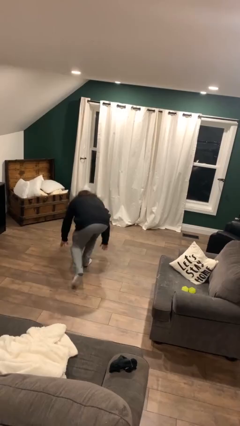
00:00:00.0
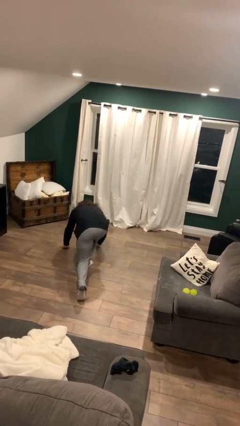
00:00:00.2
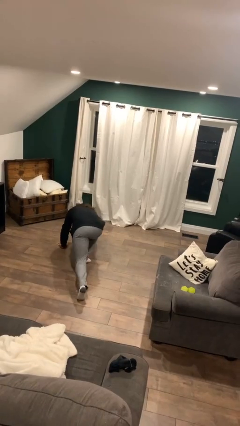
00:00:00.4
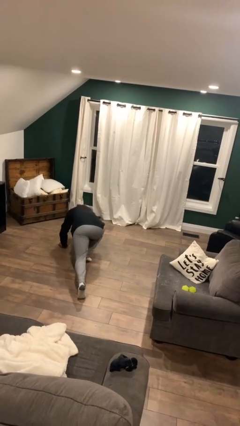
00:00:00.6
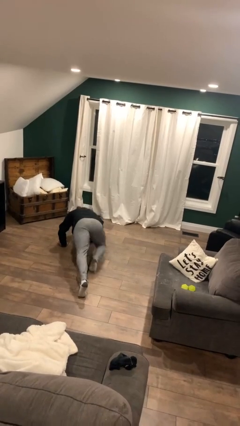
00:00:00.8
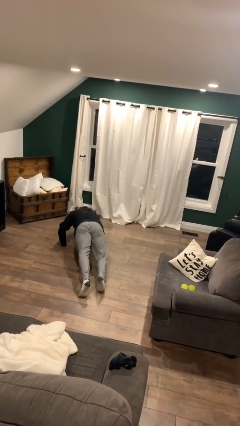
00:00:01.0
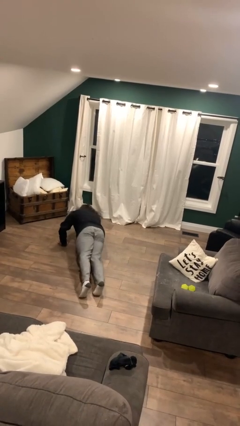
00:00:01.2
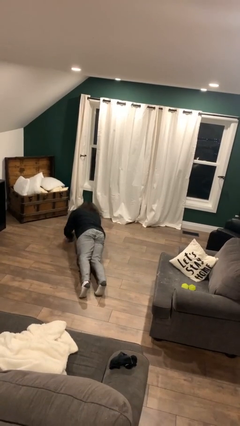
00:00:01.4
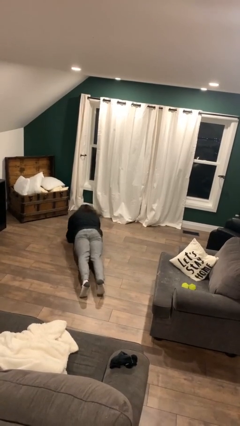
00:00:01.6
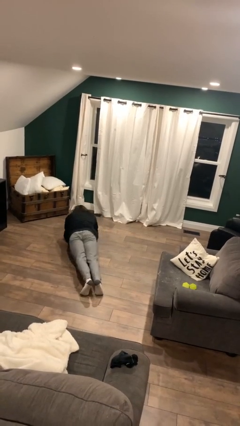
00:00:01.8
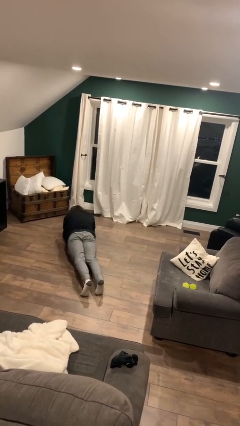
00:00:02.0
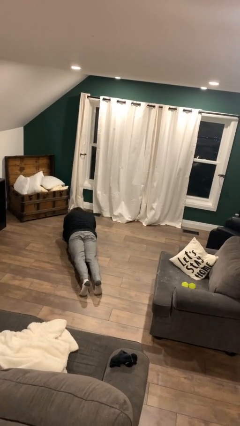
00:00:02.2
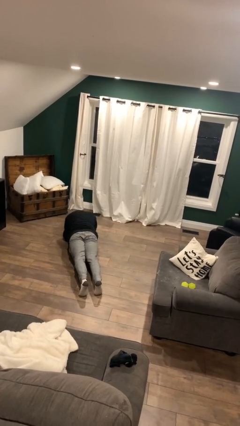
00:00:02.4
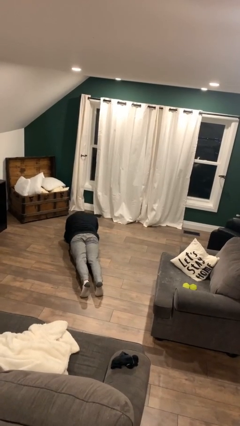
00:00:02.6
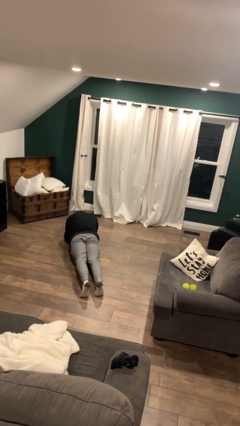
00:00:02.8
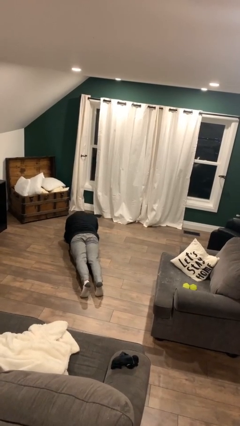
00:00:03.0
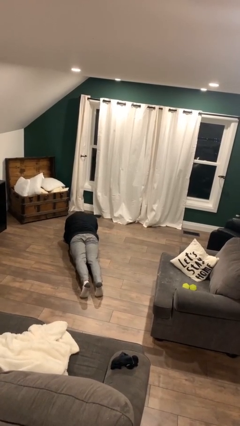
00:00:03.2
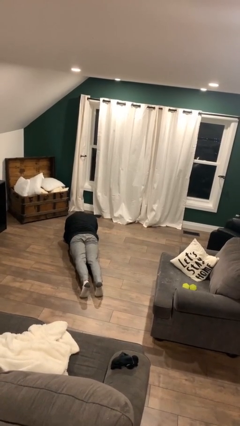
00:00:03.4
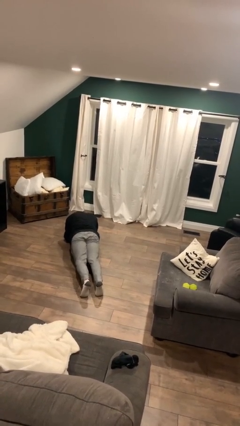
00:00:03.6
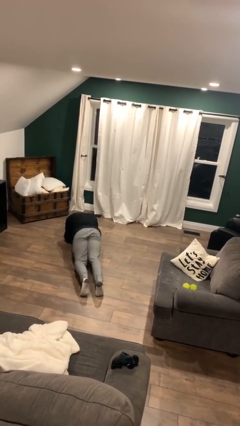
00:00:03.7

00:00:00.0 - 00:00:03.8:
person exercises with plank

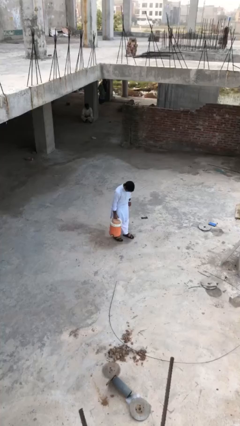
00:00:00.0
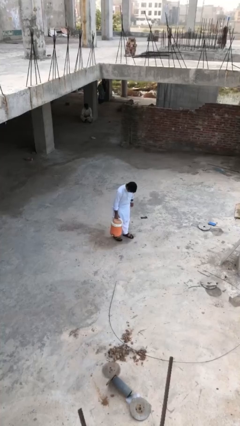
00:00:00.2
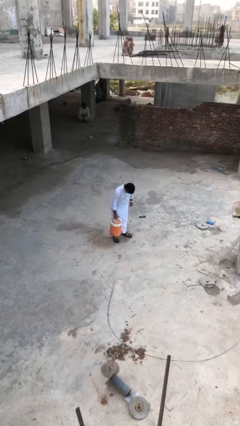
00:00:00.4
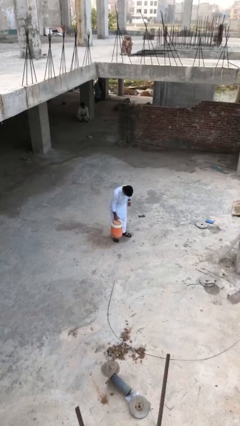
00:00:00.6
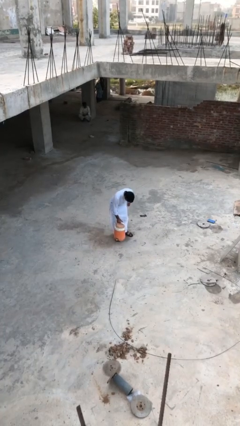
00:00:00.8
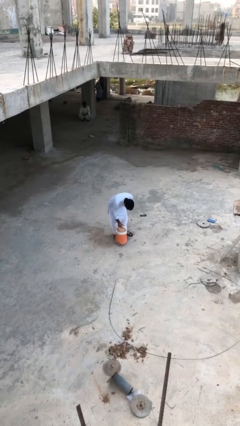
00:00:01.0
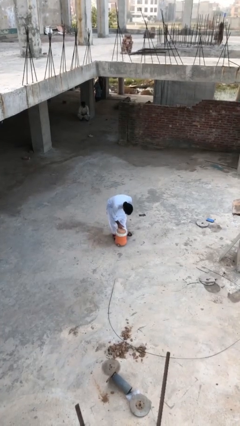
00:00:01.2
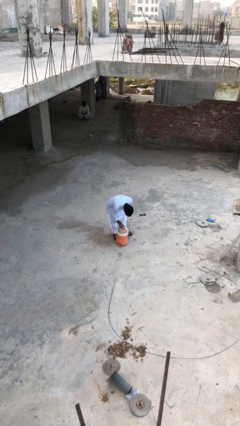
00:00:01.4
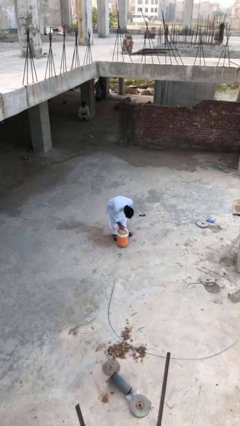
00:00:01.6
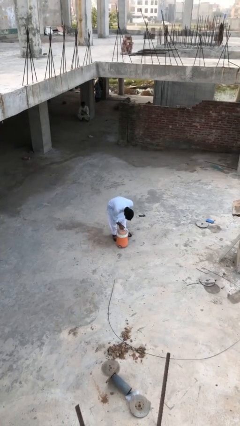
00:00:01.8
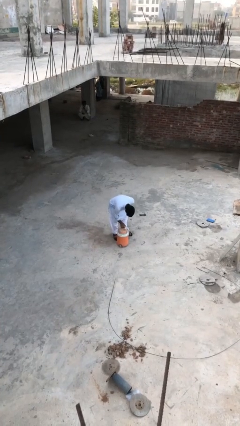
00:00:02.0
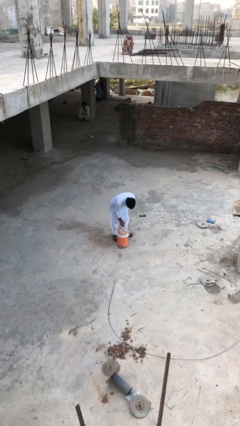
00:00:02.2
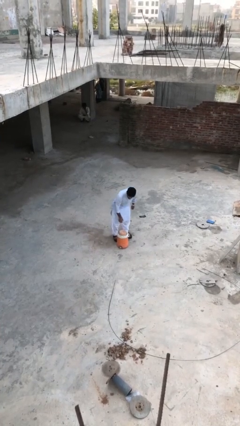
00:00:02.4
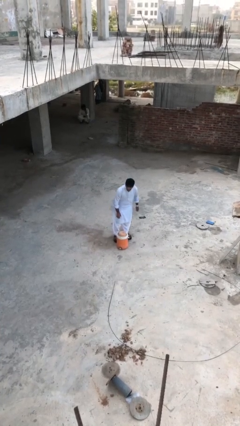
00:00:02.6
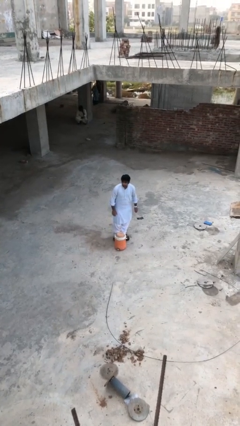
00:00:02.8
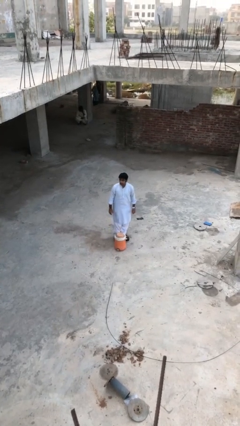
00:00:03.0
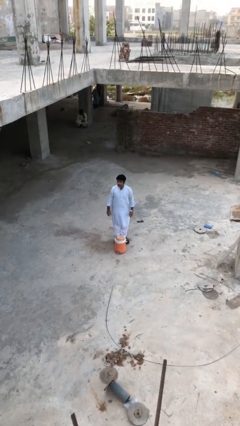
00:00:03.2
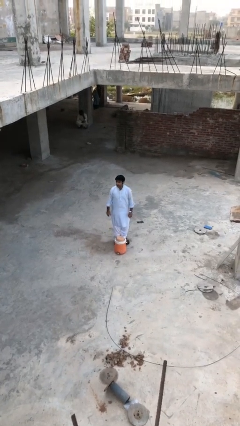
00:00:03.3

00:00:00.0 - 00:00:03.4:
person puts down object on floor

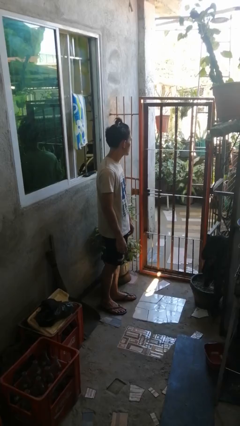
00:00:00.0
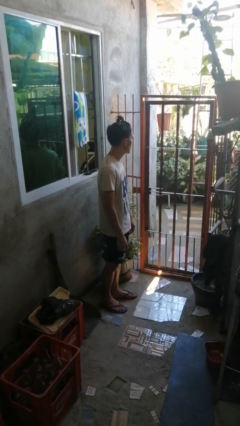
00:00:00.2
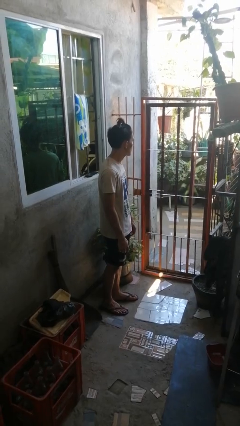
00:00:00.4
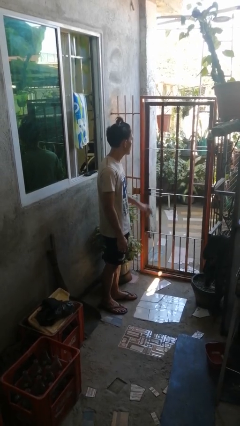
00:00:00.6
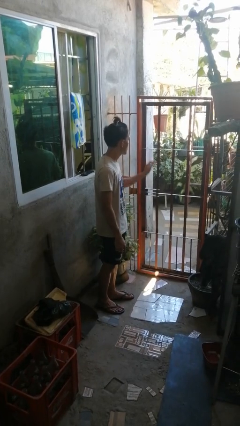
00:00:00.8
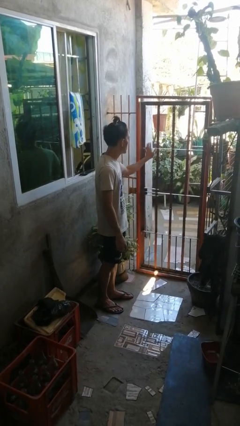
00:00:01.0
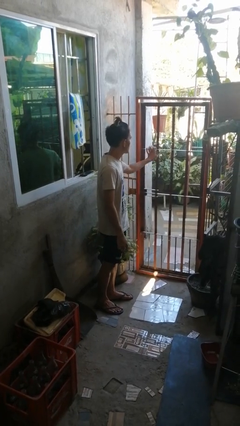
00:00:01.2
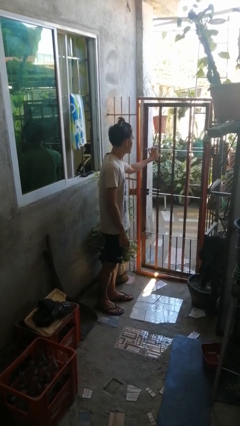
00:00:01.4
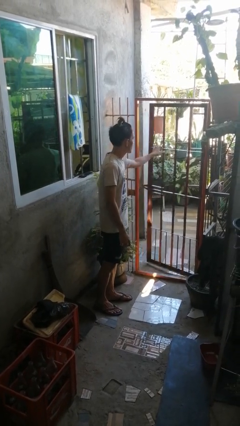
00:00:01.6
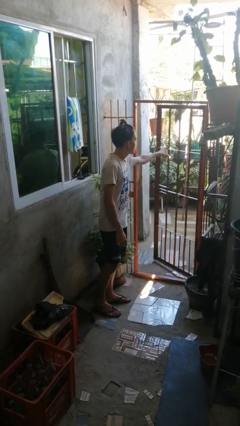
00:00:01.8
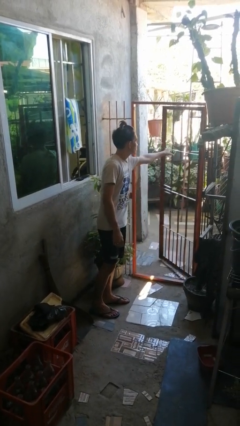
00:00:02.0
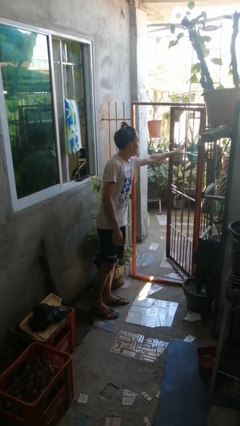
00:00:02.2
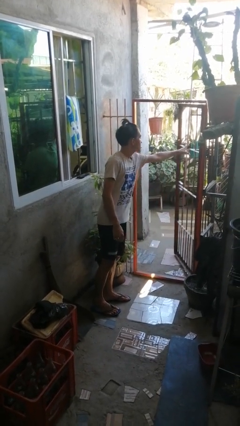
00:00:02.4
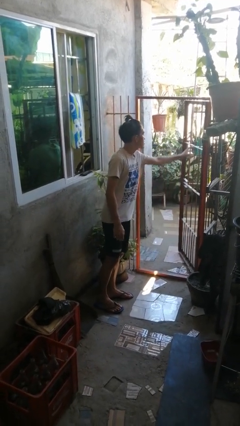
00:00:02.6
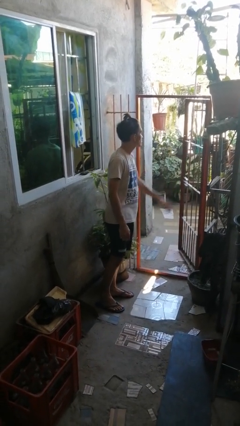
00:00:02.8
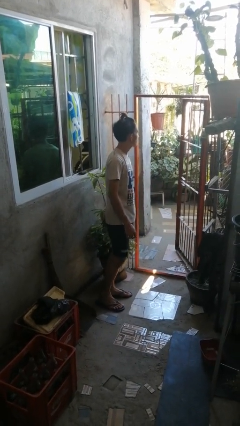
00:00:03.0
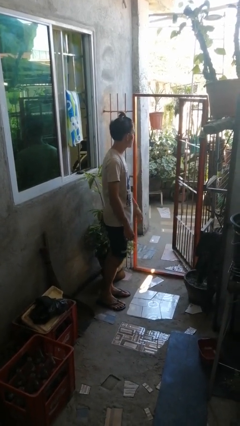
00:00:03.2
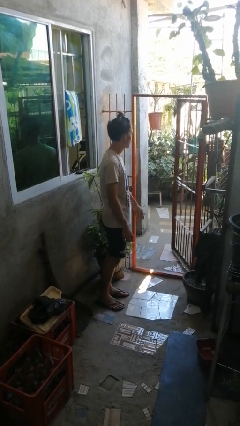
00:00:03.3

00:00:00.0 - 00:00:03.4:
person opens gate

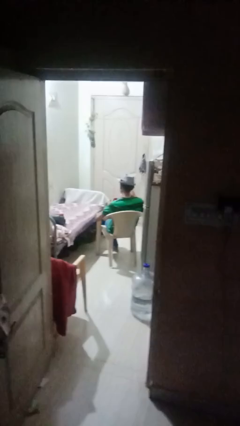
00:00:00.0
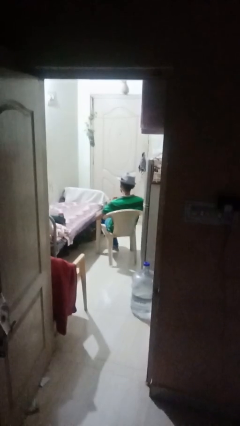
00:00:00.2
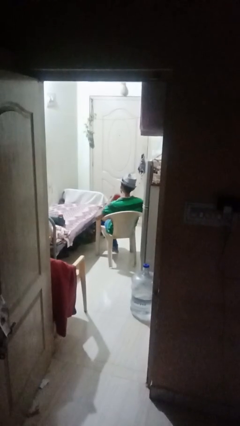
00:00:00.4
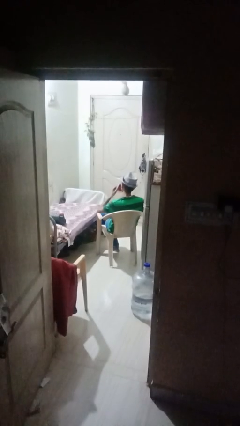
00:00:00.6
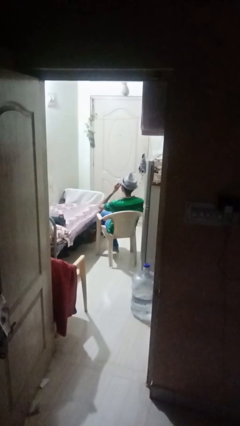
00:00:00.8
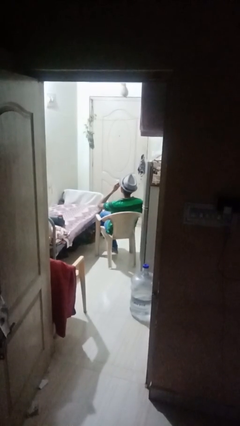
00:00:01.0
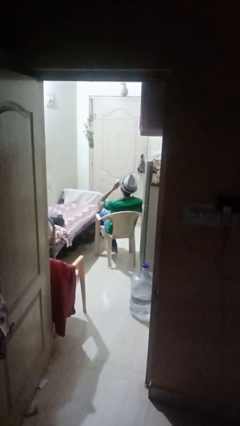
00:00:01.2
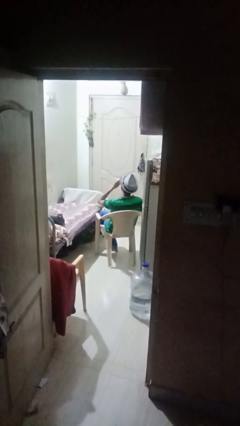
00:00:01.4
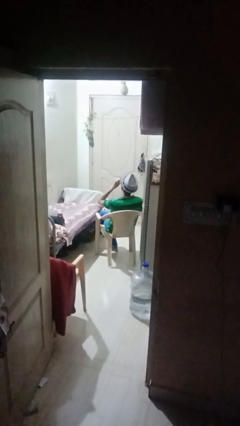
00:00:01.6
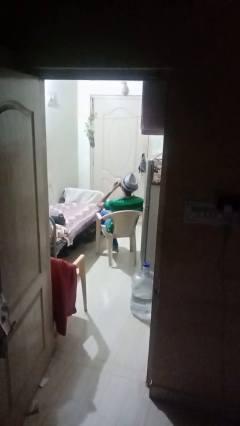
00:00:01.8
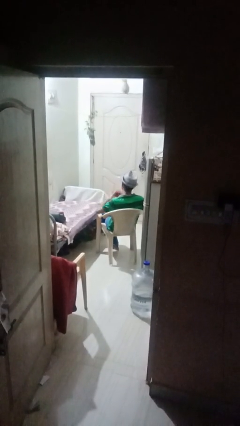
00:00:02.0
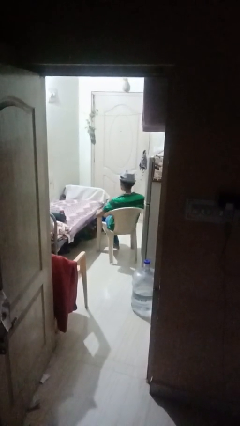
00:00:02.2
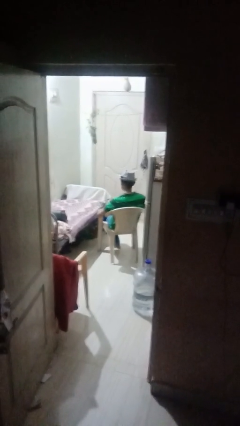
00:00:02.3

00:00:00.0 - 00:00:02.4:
person drinks from mug

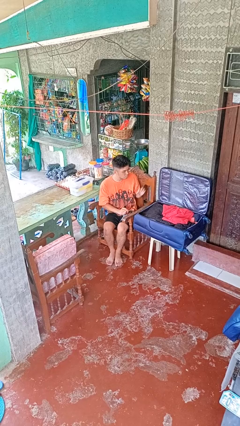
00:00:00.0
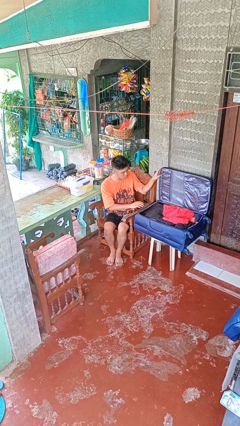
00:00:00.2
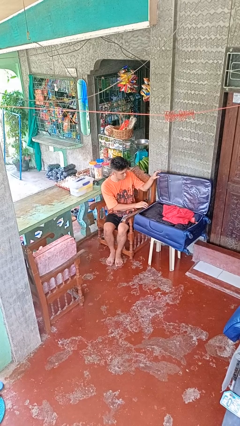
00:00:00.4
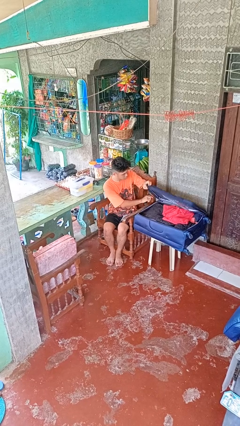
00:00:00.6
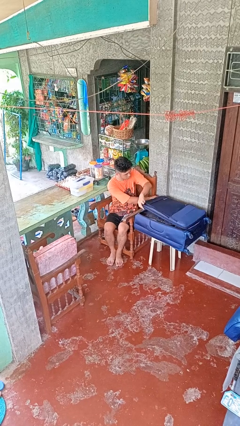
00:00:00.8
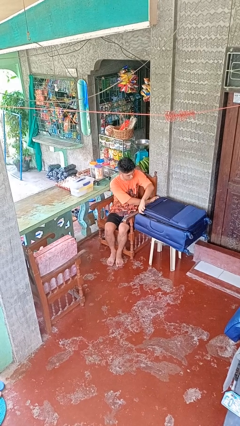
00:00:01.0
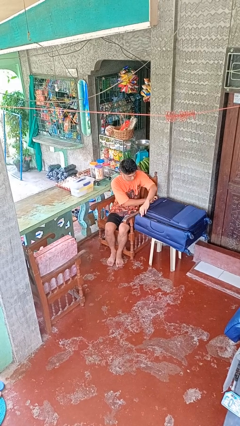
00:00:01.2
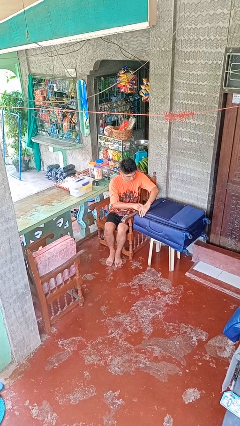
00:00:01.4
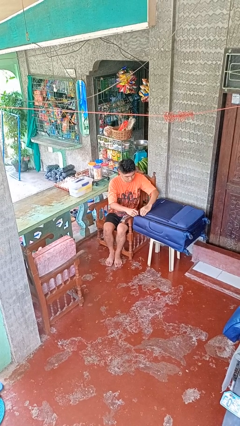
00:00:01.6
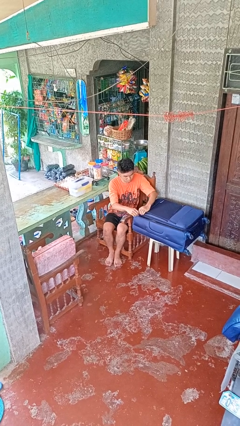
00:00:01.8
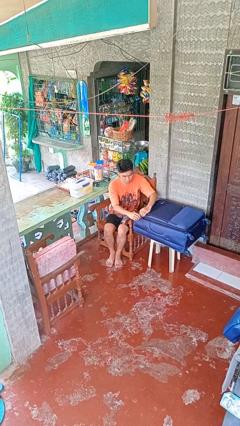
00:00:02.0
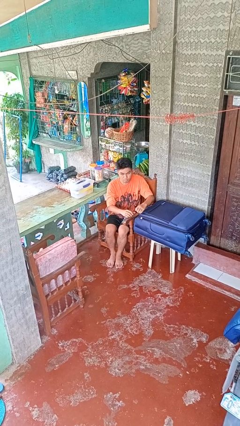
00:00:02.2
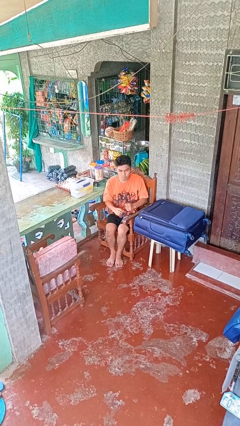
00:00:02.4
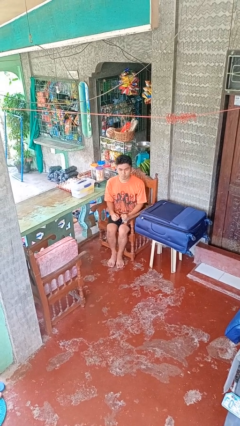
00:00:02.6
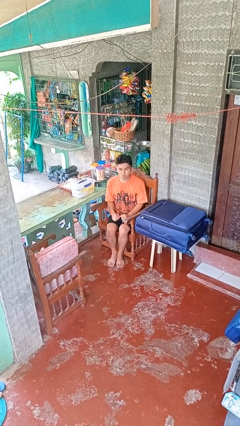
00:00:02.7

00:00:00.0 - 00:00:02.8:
person closes suitcase

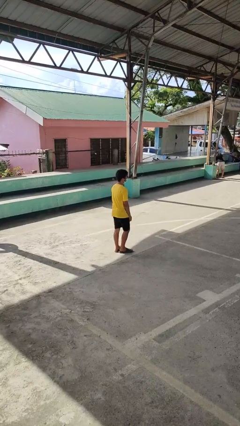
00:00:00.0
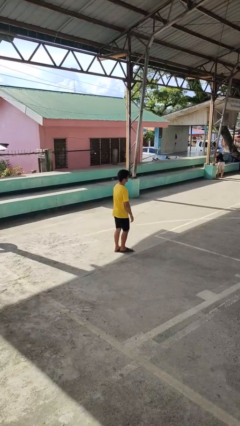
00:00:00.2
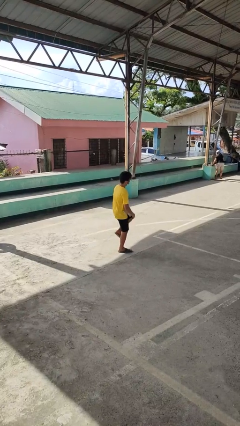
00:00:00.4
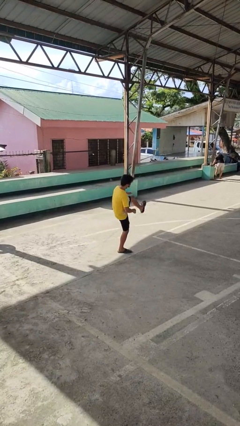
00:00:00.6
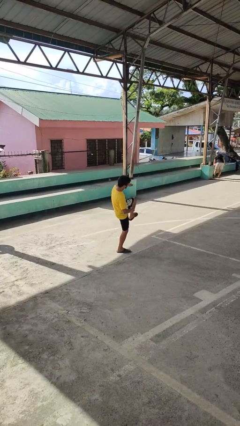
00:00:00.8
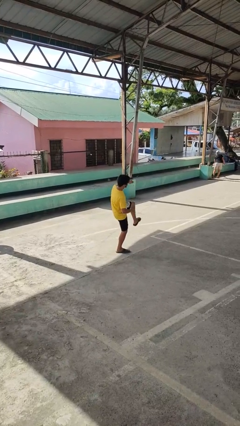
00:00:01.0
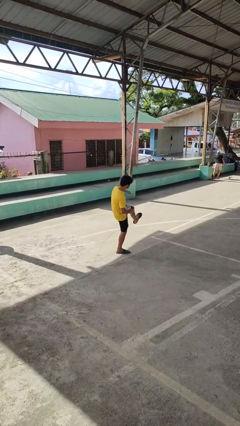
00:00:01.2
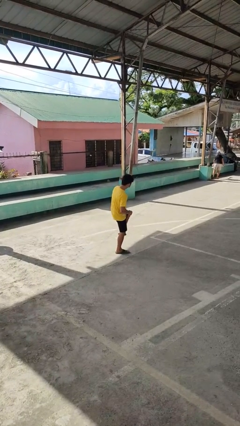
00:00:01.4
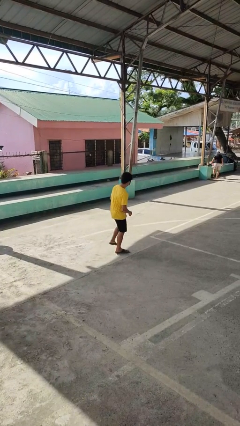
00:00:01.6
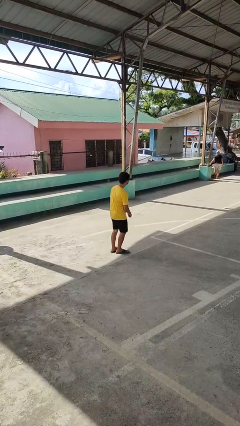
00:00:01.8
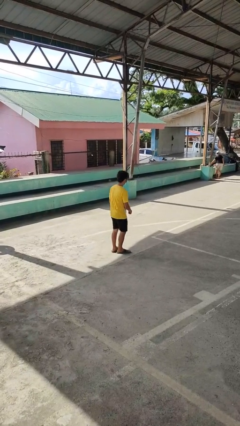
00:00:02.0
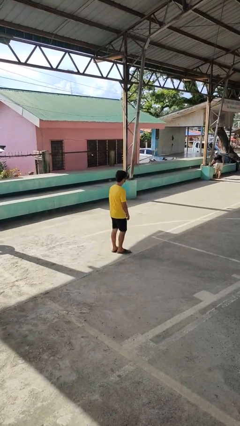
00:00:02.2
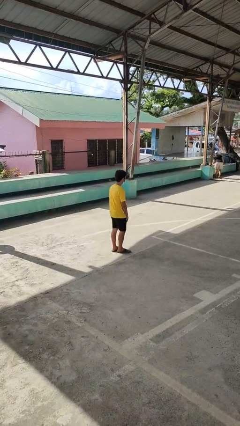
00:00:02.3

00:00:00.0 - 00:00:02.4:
person karate kicks
